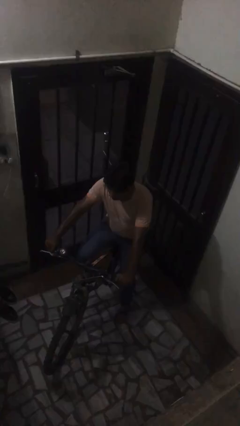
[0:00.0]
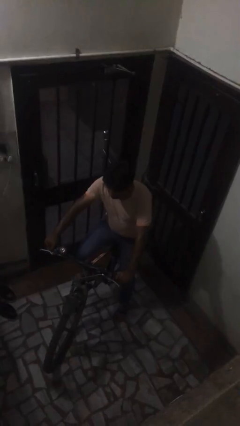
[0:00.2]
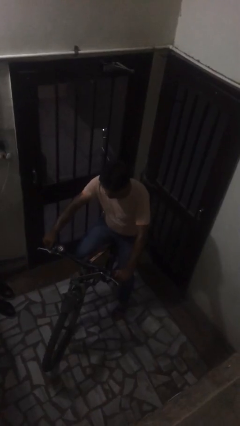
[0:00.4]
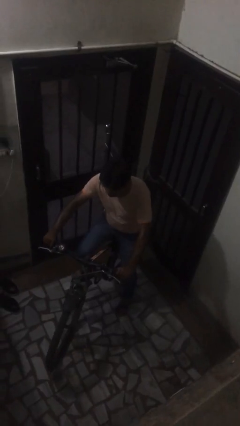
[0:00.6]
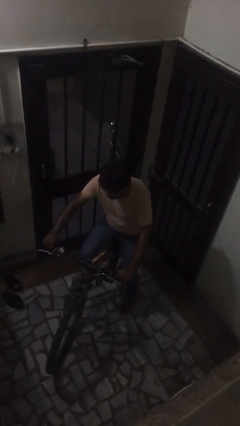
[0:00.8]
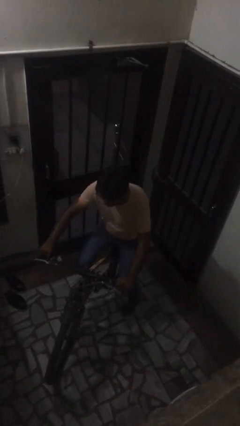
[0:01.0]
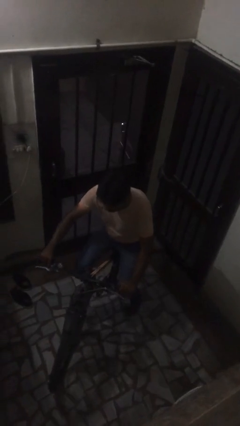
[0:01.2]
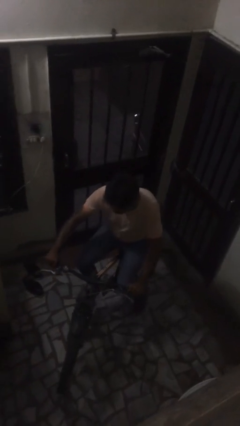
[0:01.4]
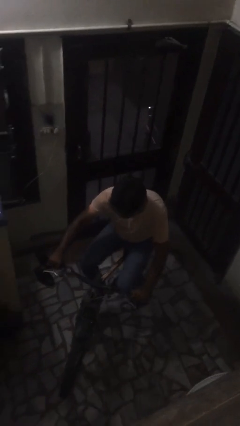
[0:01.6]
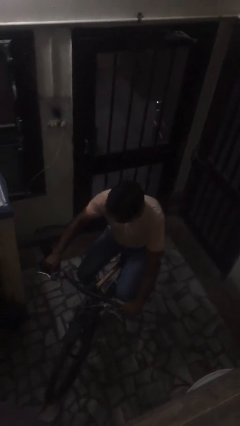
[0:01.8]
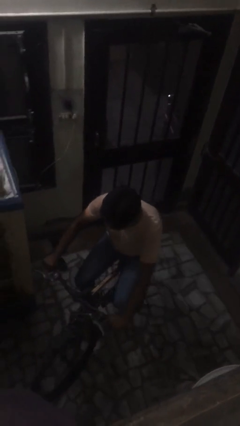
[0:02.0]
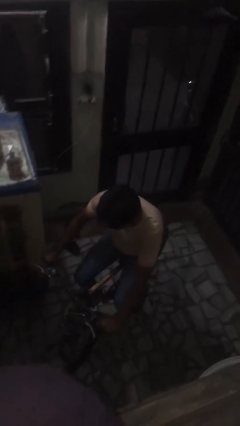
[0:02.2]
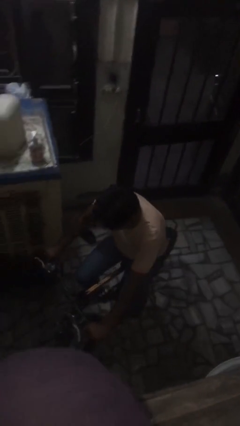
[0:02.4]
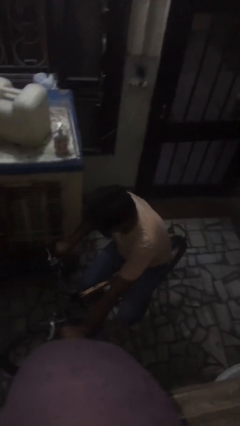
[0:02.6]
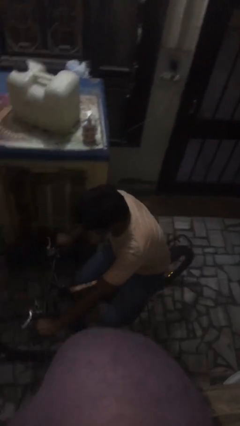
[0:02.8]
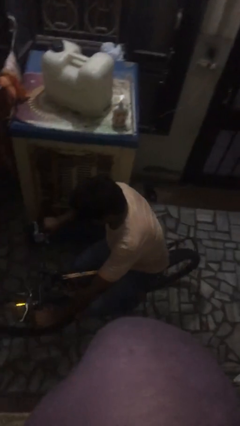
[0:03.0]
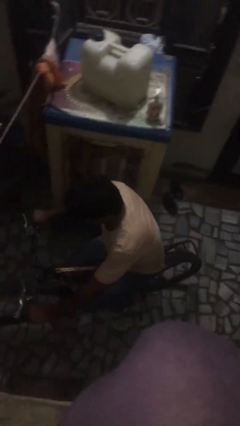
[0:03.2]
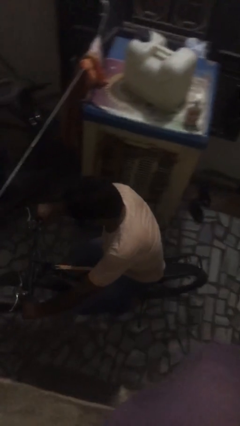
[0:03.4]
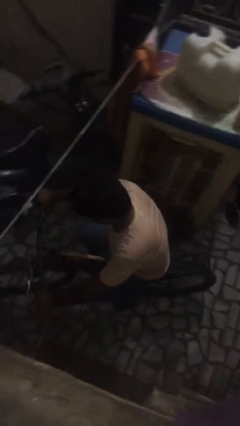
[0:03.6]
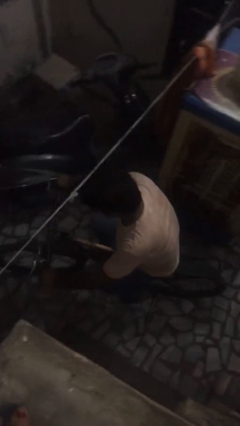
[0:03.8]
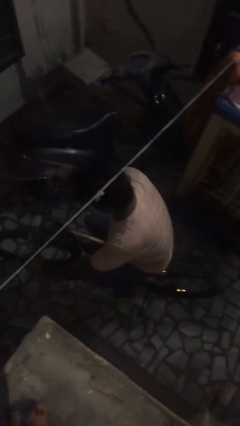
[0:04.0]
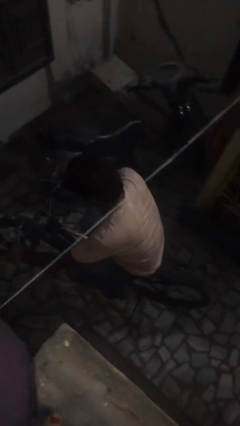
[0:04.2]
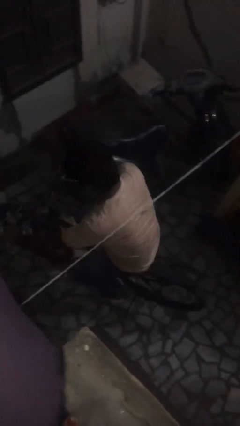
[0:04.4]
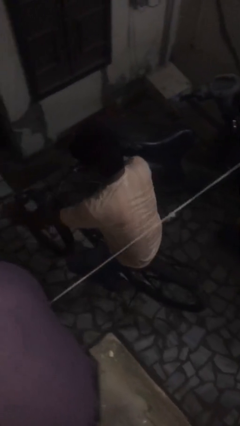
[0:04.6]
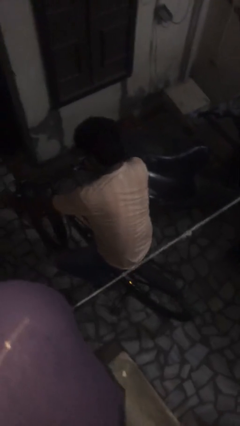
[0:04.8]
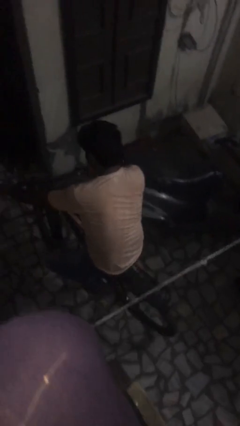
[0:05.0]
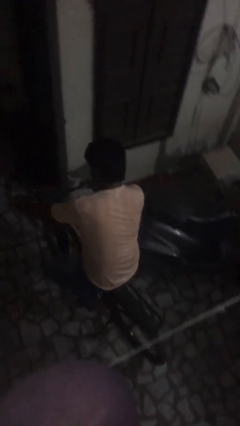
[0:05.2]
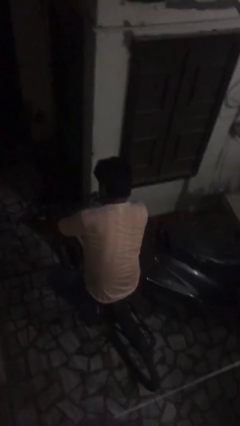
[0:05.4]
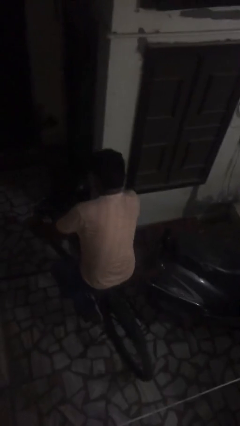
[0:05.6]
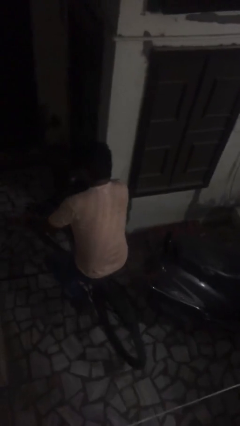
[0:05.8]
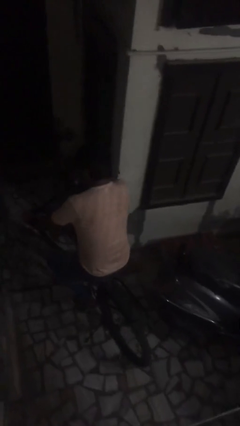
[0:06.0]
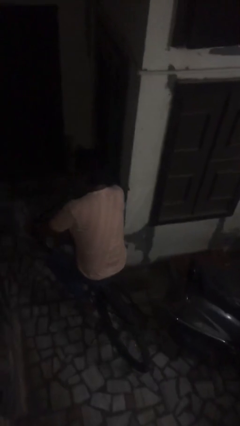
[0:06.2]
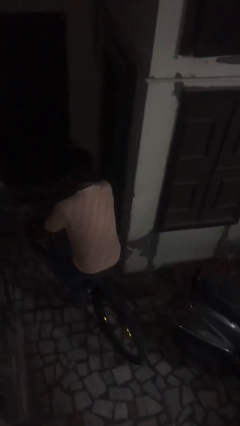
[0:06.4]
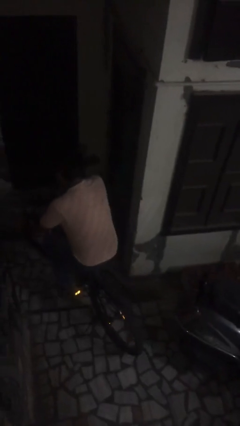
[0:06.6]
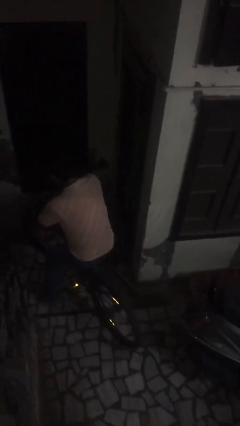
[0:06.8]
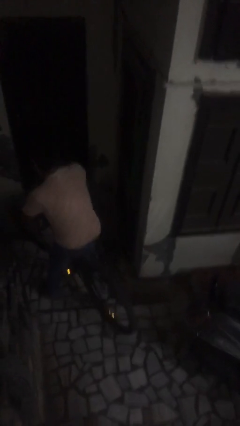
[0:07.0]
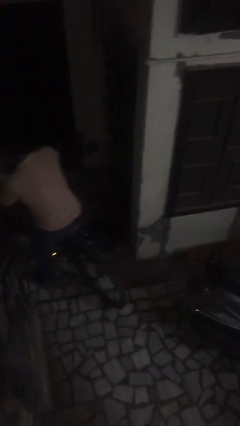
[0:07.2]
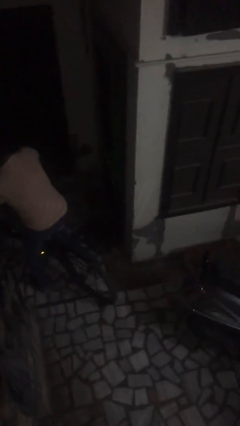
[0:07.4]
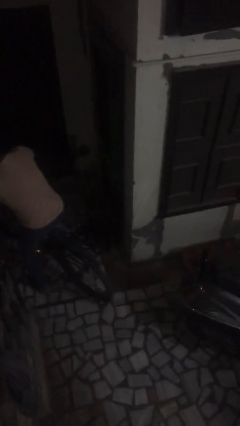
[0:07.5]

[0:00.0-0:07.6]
person rides bicycle

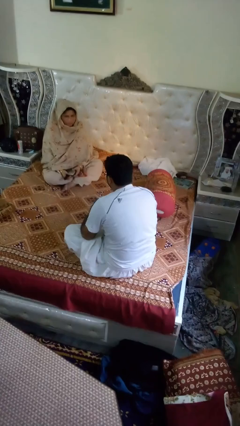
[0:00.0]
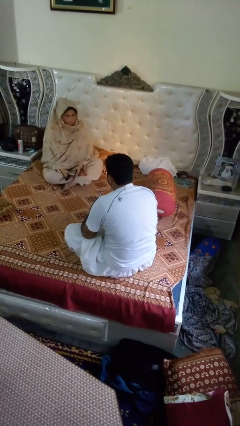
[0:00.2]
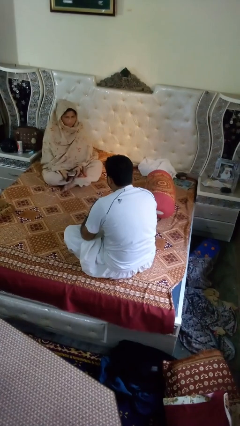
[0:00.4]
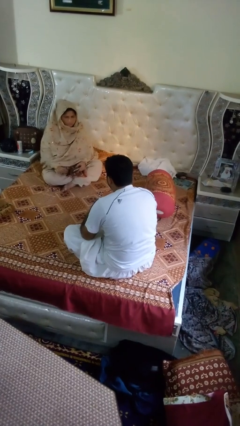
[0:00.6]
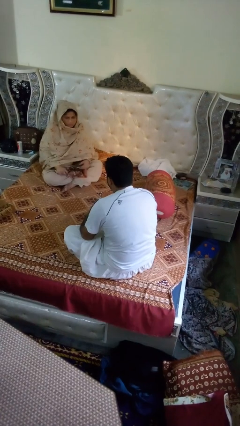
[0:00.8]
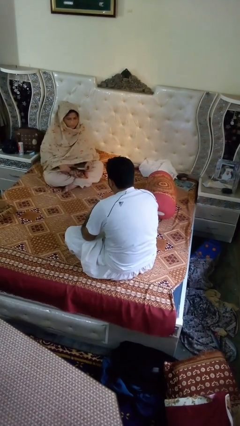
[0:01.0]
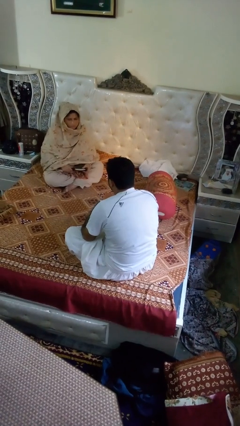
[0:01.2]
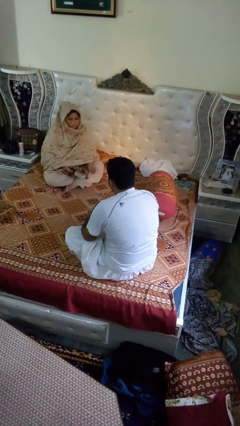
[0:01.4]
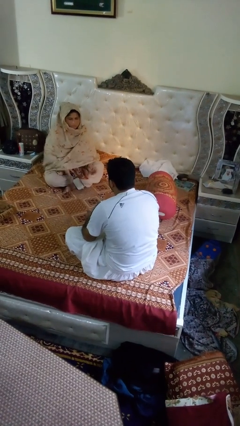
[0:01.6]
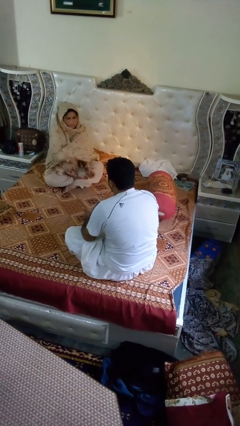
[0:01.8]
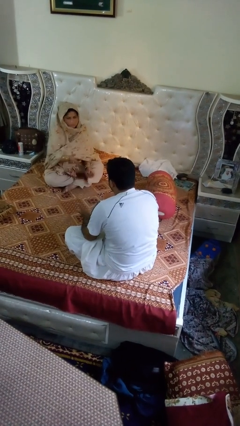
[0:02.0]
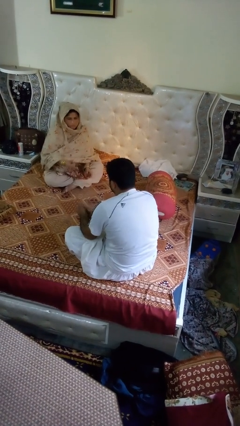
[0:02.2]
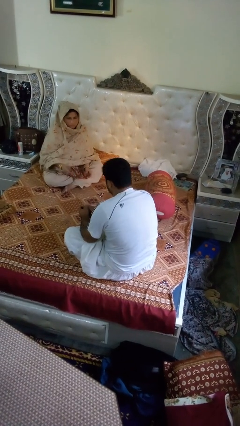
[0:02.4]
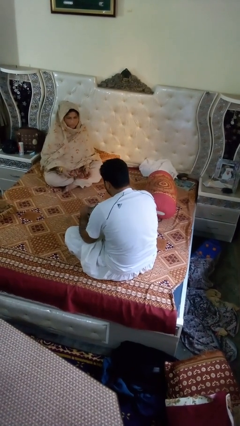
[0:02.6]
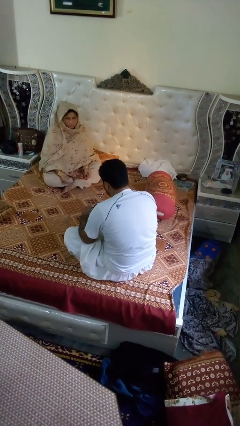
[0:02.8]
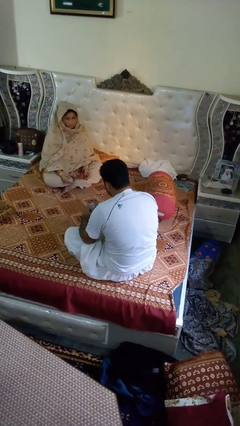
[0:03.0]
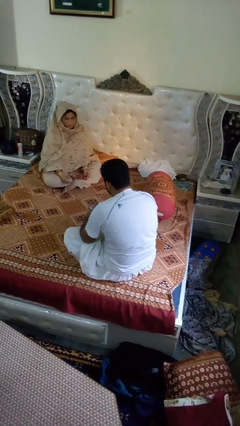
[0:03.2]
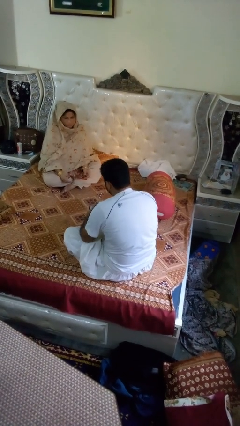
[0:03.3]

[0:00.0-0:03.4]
person catches object from person

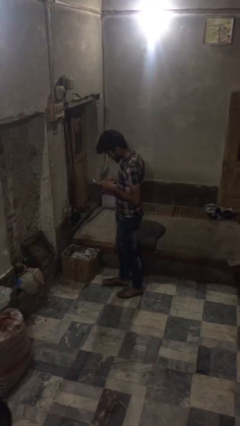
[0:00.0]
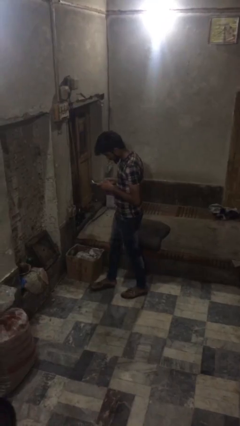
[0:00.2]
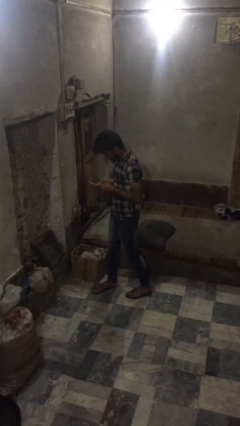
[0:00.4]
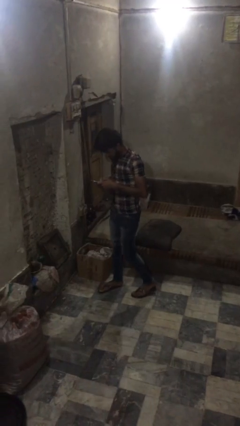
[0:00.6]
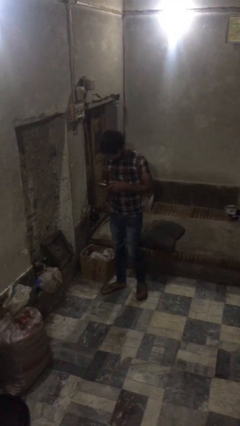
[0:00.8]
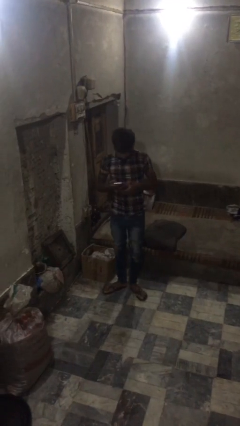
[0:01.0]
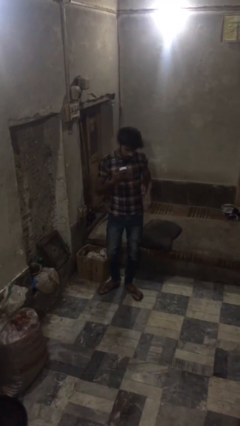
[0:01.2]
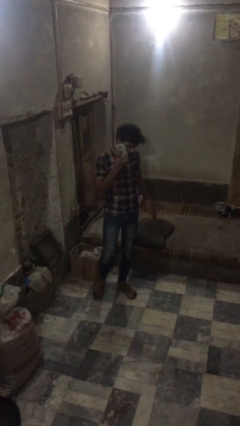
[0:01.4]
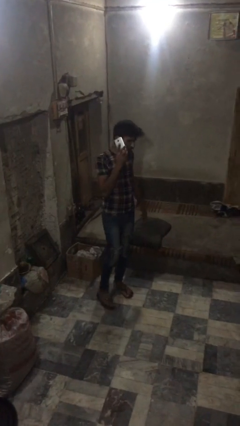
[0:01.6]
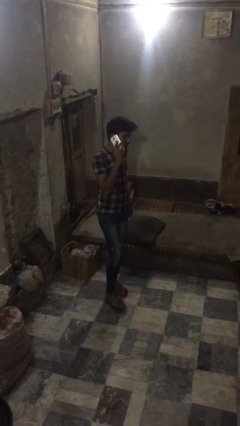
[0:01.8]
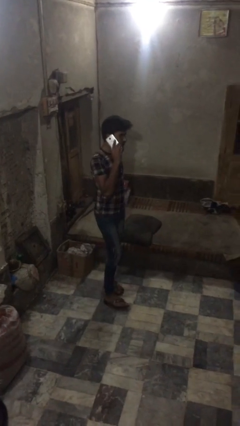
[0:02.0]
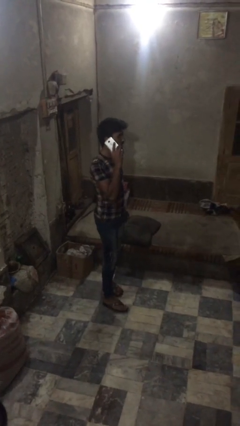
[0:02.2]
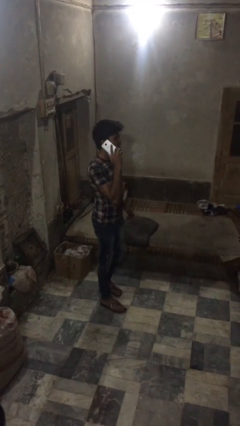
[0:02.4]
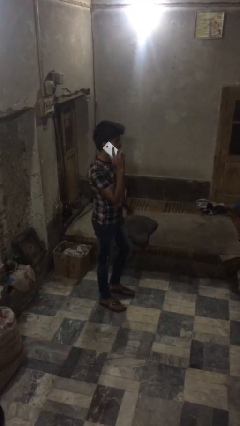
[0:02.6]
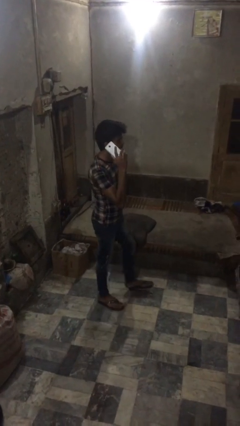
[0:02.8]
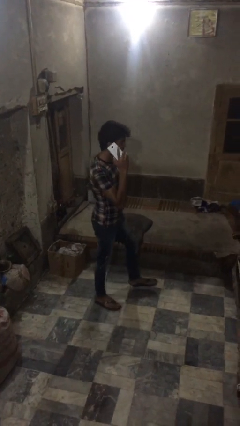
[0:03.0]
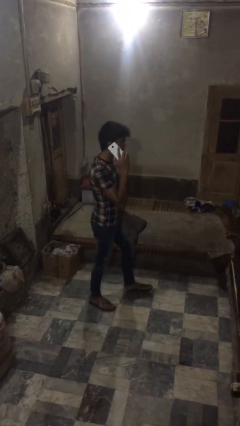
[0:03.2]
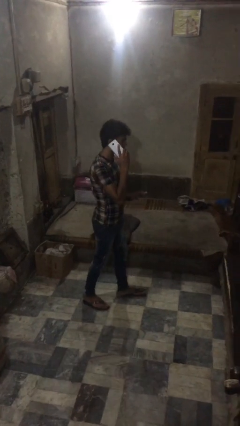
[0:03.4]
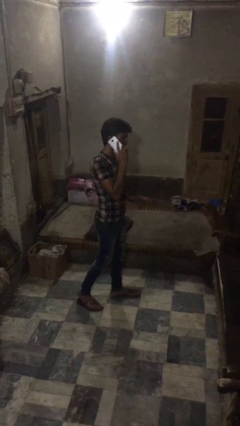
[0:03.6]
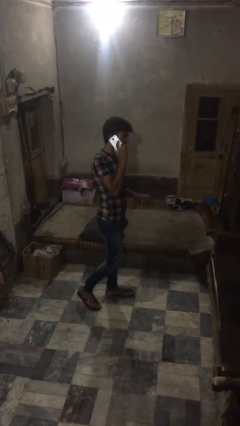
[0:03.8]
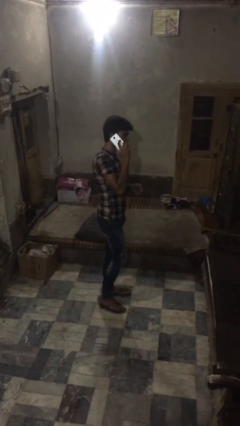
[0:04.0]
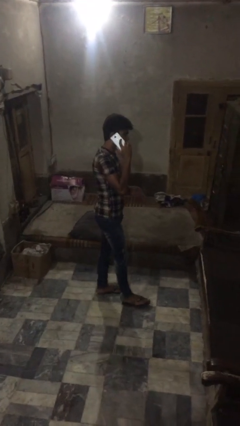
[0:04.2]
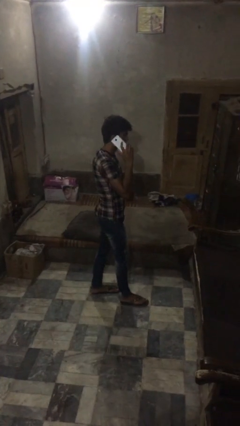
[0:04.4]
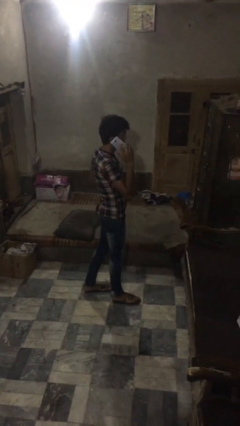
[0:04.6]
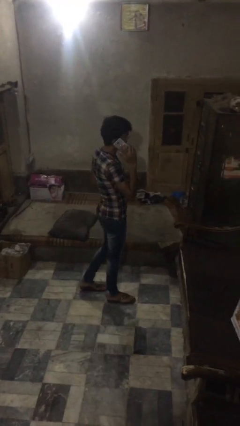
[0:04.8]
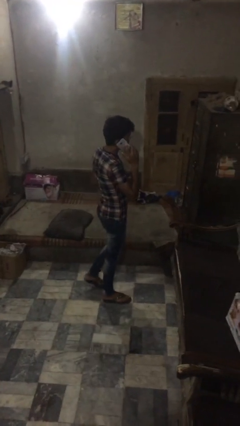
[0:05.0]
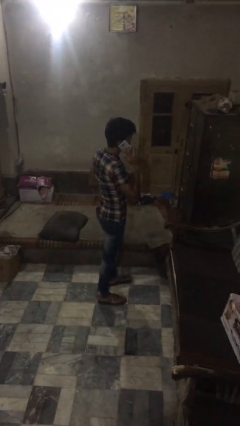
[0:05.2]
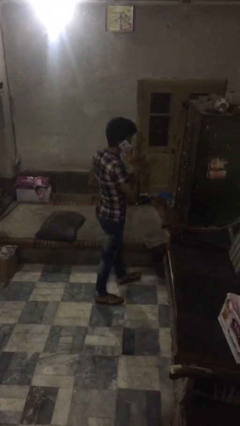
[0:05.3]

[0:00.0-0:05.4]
person talks on phone

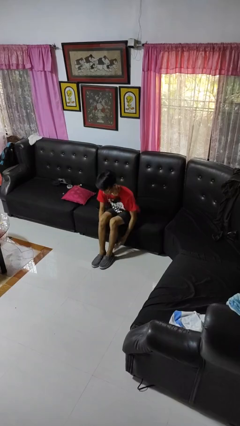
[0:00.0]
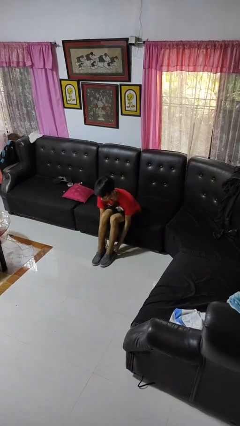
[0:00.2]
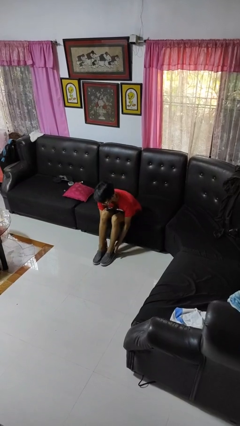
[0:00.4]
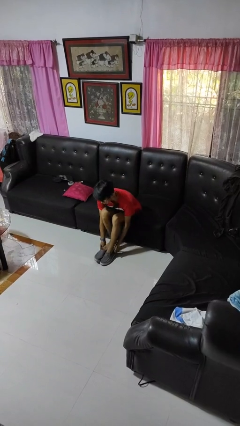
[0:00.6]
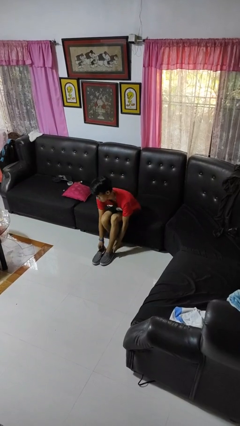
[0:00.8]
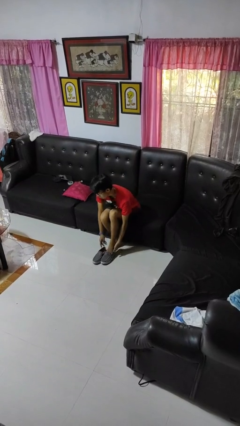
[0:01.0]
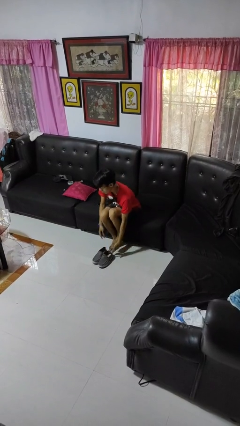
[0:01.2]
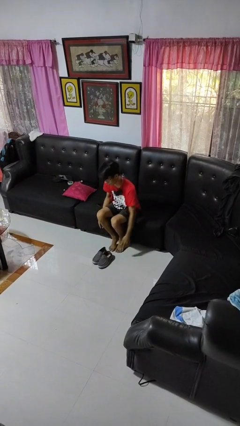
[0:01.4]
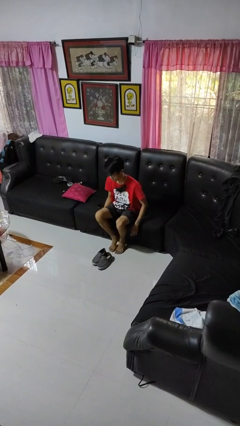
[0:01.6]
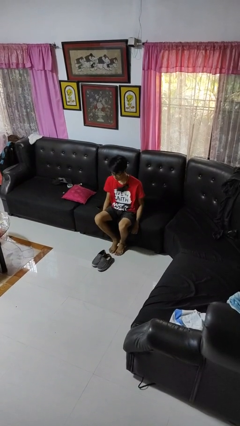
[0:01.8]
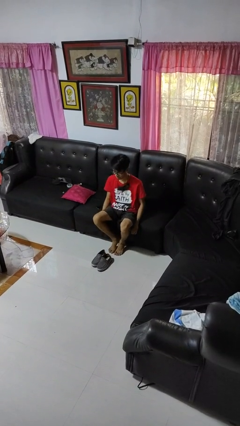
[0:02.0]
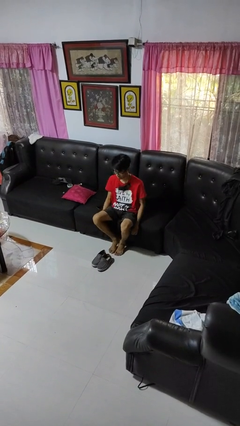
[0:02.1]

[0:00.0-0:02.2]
person takes off shoes
